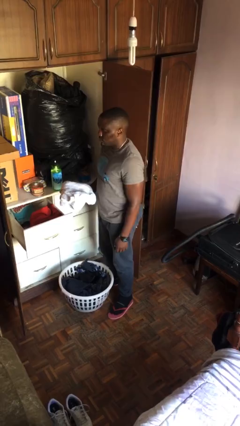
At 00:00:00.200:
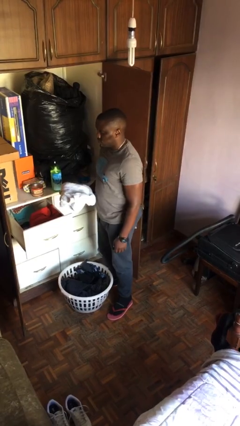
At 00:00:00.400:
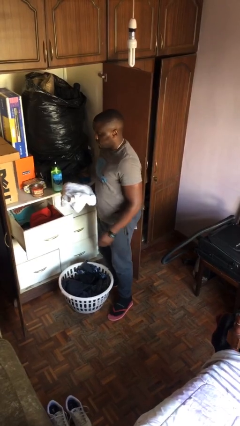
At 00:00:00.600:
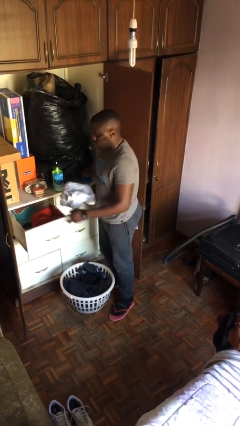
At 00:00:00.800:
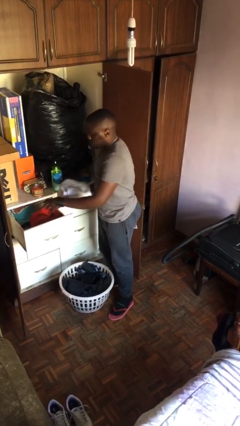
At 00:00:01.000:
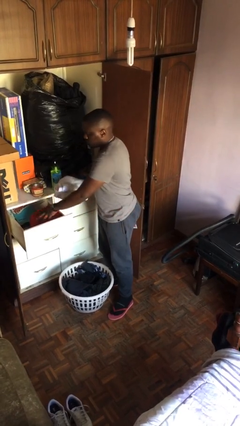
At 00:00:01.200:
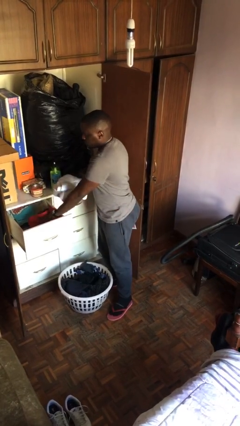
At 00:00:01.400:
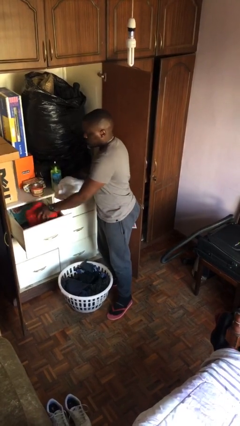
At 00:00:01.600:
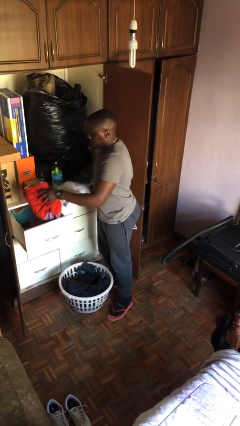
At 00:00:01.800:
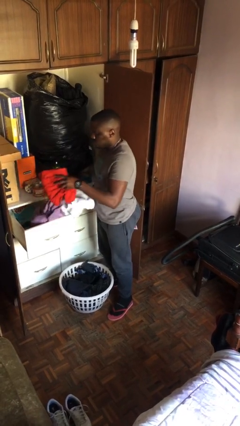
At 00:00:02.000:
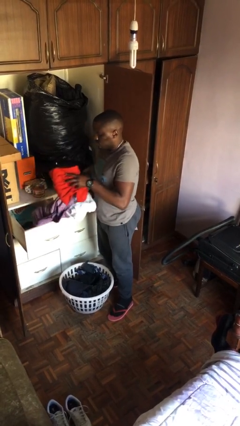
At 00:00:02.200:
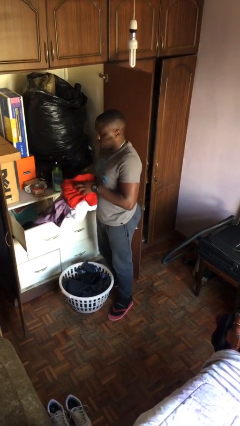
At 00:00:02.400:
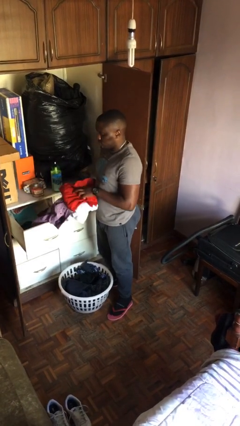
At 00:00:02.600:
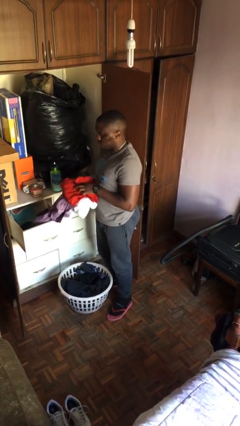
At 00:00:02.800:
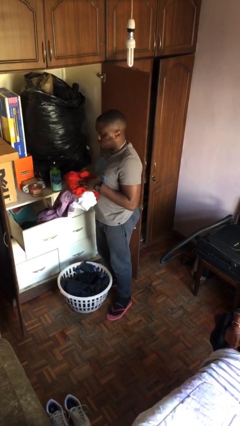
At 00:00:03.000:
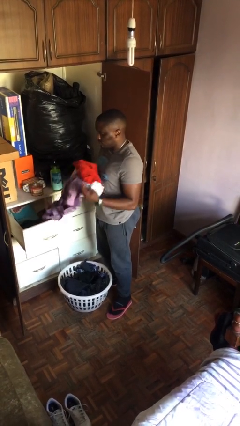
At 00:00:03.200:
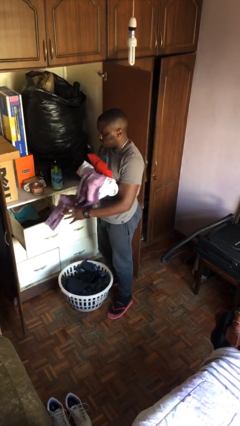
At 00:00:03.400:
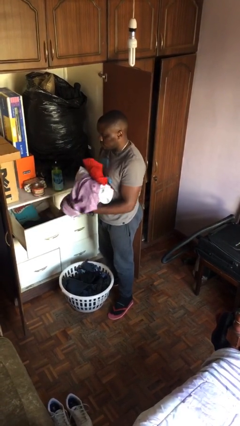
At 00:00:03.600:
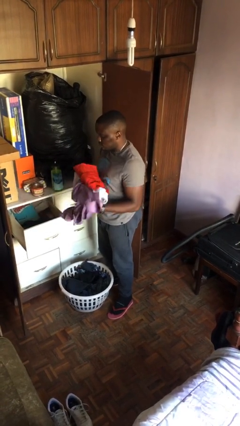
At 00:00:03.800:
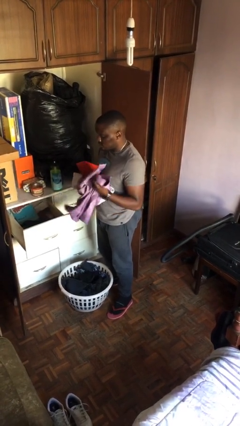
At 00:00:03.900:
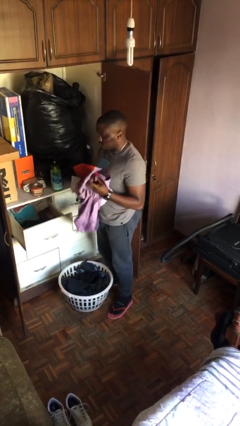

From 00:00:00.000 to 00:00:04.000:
person takes clothes from dresser

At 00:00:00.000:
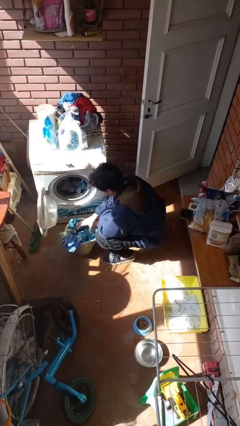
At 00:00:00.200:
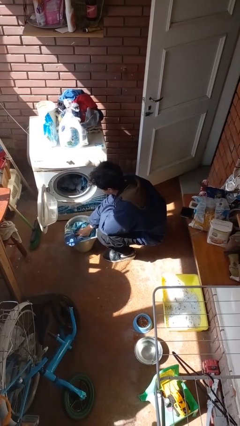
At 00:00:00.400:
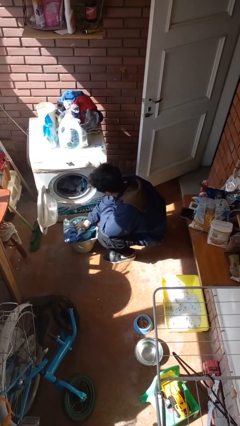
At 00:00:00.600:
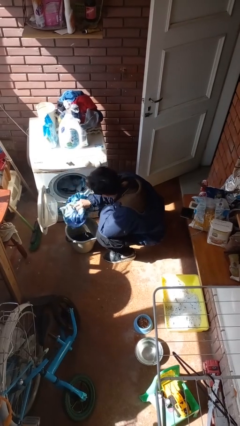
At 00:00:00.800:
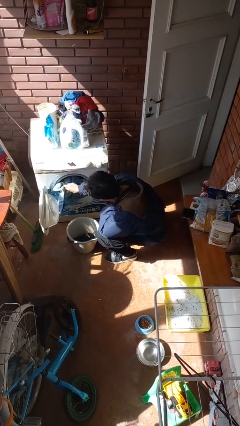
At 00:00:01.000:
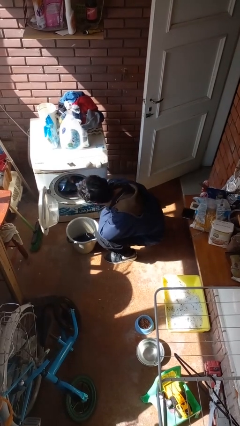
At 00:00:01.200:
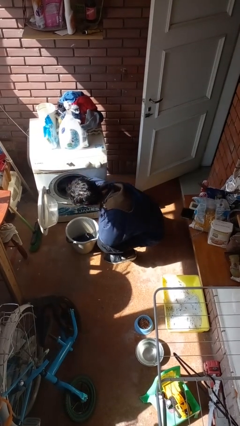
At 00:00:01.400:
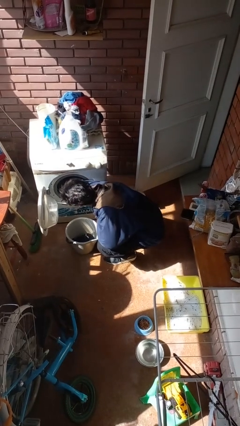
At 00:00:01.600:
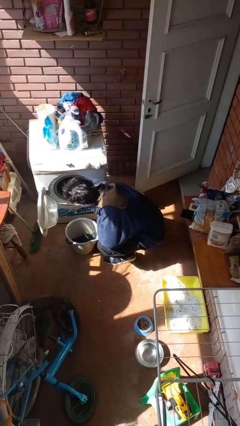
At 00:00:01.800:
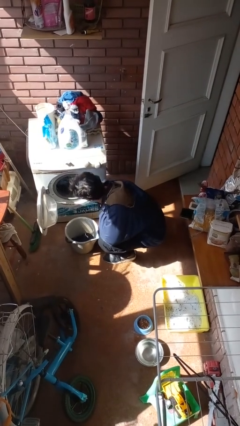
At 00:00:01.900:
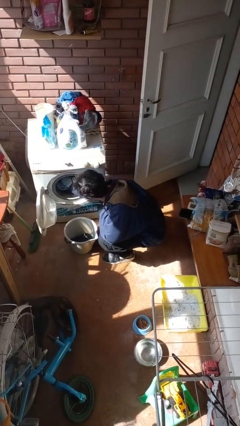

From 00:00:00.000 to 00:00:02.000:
person loads clotheswasher

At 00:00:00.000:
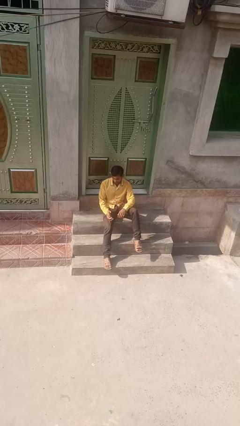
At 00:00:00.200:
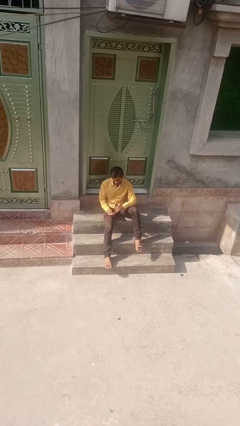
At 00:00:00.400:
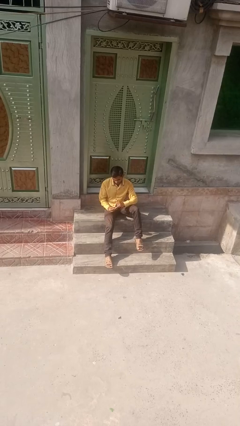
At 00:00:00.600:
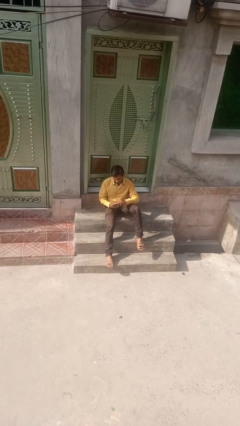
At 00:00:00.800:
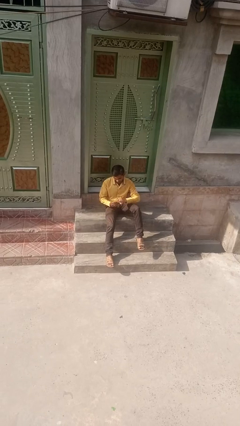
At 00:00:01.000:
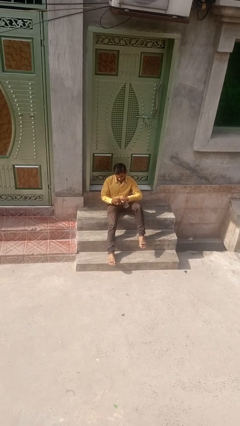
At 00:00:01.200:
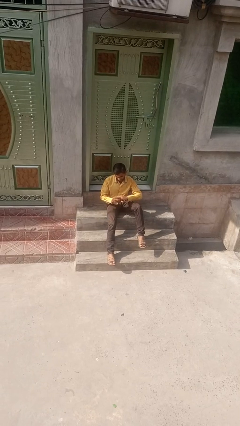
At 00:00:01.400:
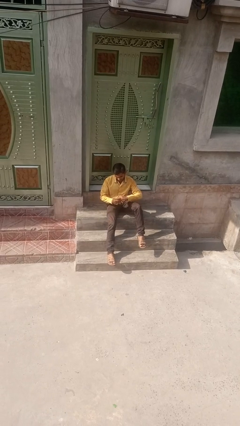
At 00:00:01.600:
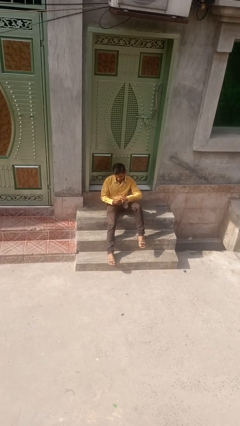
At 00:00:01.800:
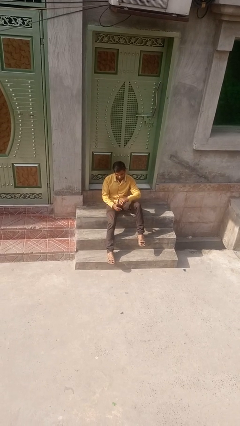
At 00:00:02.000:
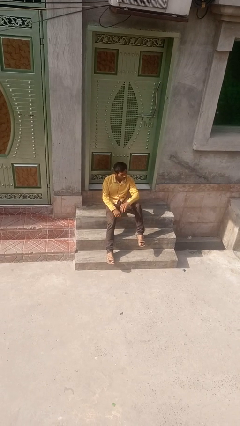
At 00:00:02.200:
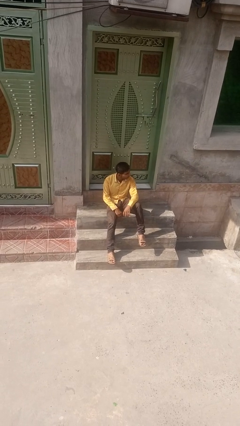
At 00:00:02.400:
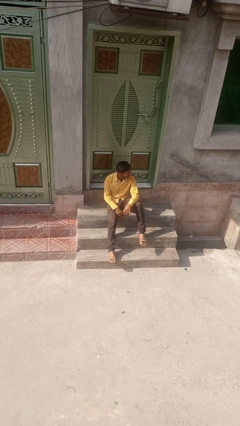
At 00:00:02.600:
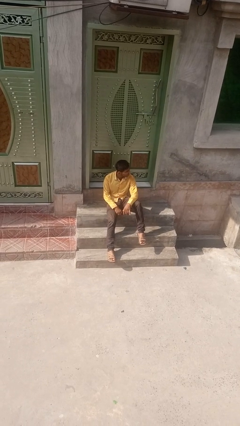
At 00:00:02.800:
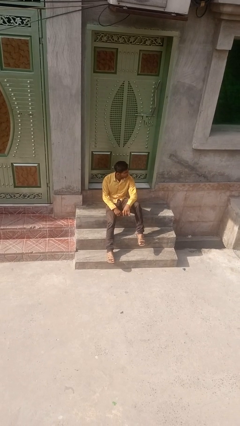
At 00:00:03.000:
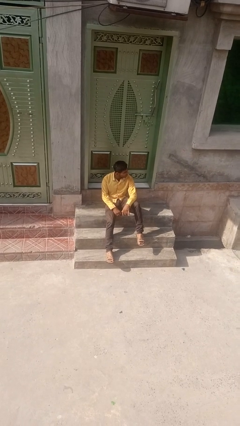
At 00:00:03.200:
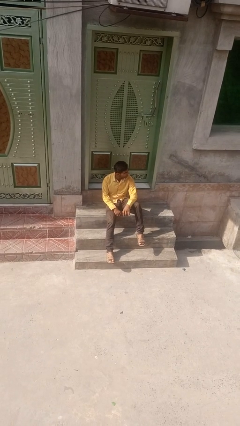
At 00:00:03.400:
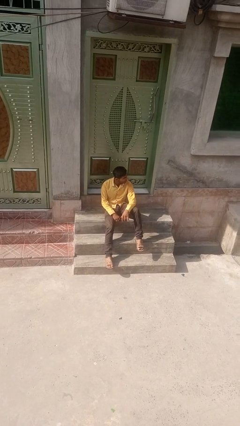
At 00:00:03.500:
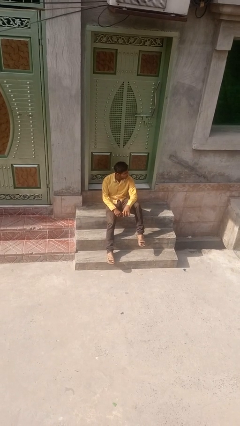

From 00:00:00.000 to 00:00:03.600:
person puts on ring

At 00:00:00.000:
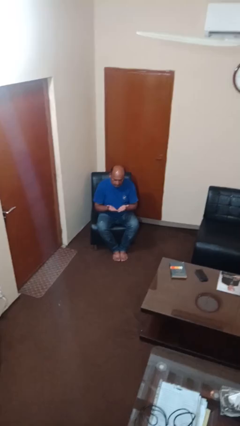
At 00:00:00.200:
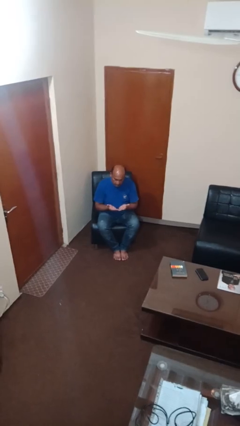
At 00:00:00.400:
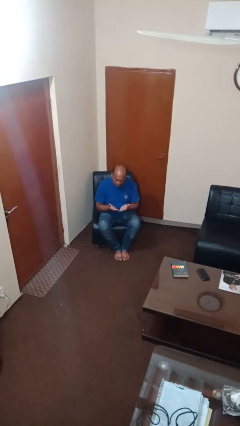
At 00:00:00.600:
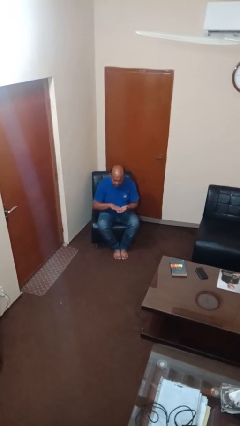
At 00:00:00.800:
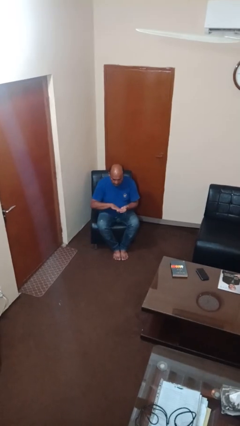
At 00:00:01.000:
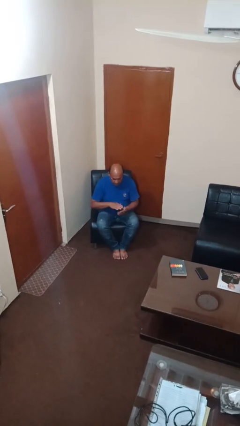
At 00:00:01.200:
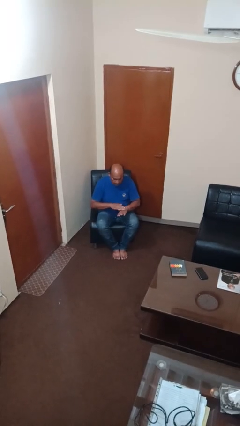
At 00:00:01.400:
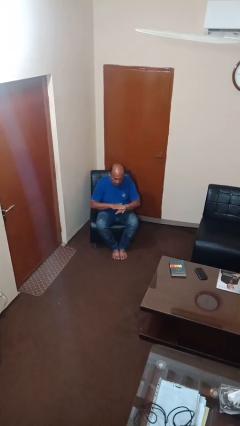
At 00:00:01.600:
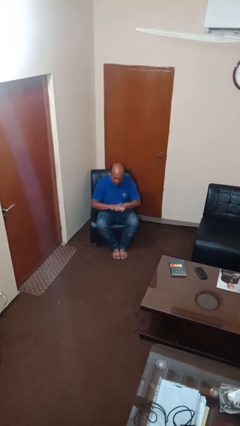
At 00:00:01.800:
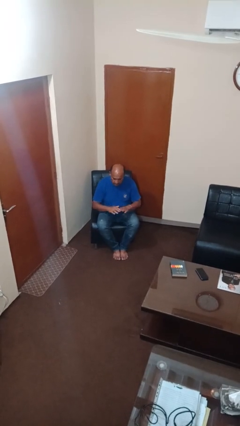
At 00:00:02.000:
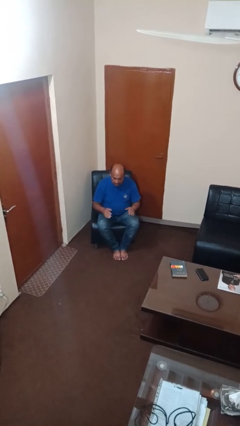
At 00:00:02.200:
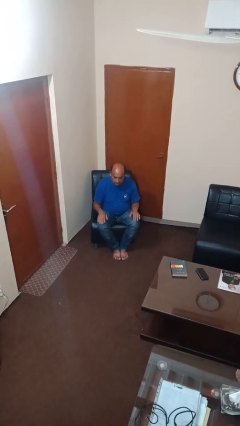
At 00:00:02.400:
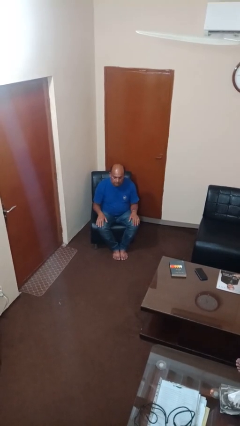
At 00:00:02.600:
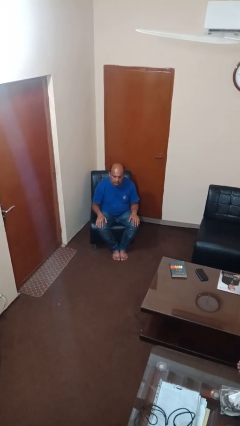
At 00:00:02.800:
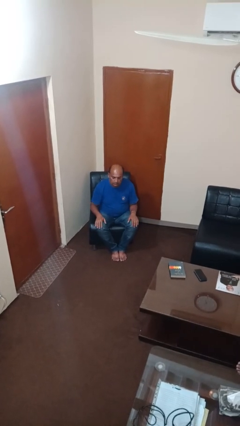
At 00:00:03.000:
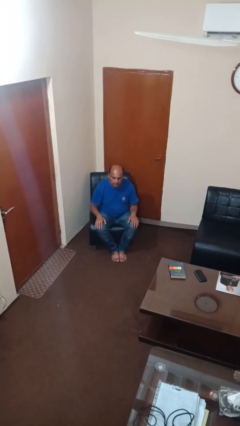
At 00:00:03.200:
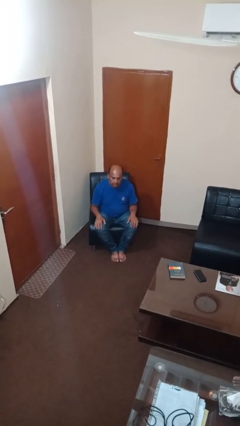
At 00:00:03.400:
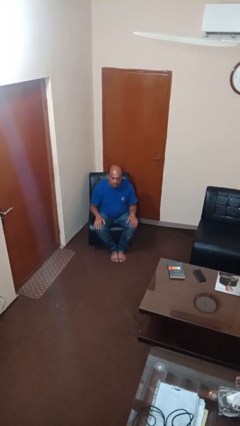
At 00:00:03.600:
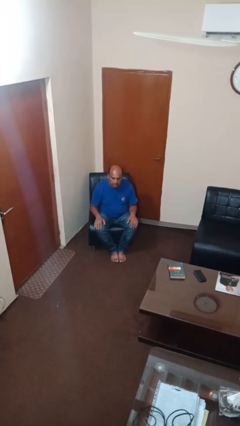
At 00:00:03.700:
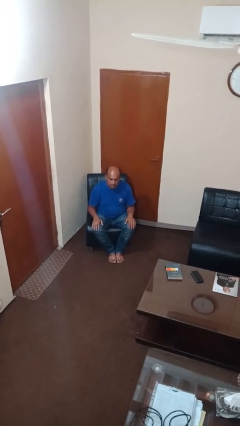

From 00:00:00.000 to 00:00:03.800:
person looks at hands in lap

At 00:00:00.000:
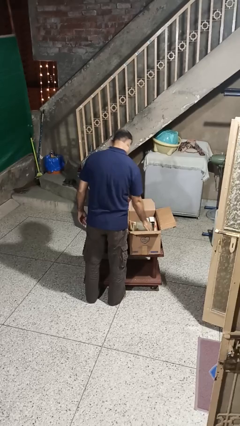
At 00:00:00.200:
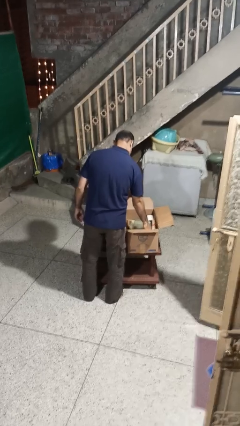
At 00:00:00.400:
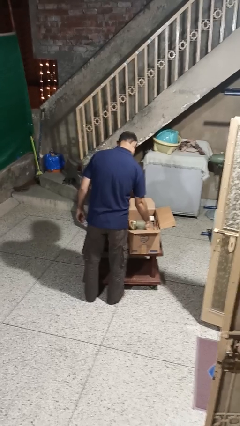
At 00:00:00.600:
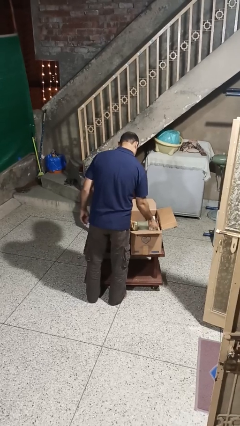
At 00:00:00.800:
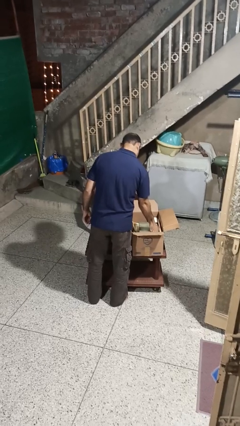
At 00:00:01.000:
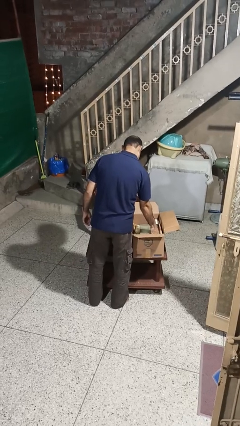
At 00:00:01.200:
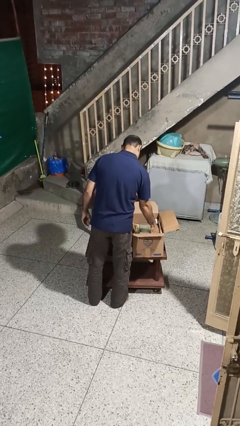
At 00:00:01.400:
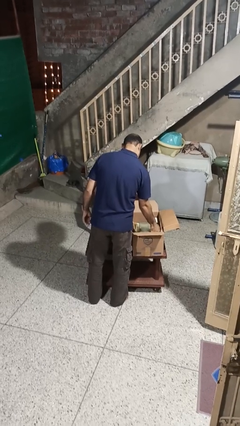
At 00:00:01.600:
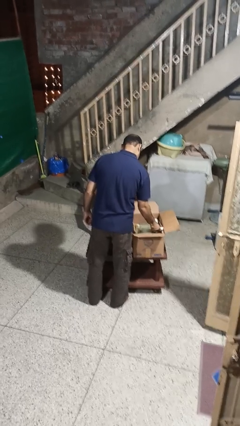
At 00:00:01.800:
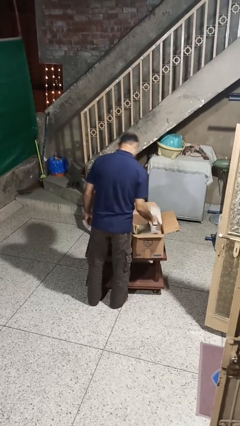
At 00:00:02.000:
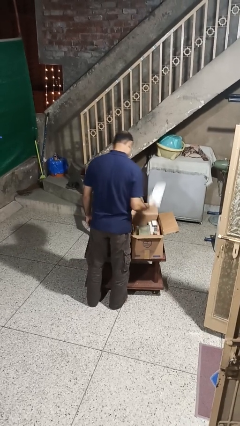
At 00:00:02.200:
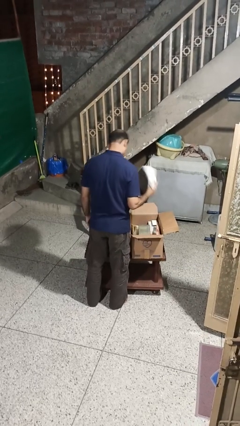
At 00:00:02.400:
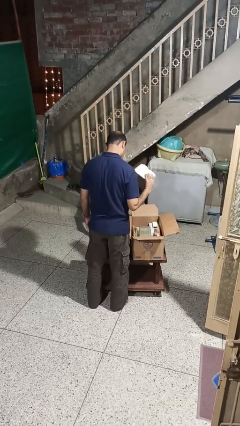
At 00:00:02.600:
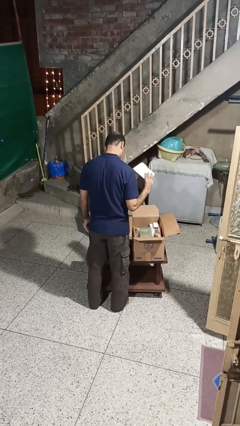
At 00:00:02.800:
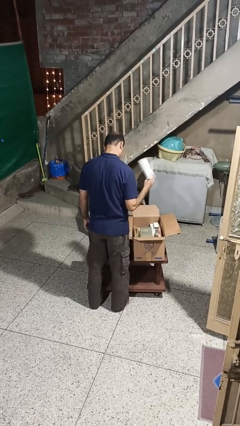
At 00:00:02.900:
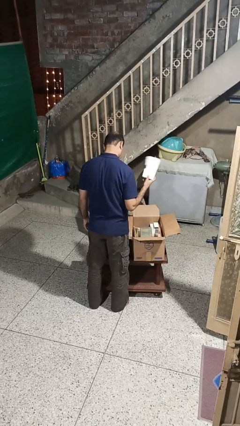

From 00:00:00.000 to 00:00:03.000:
person takes object from box

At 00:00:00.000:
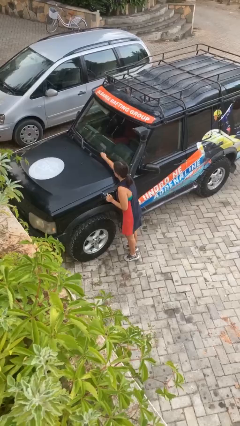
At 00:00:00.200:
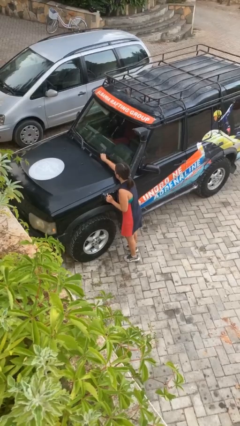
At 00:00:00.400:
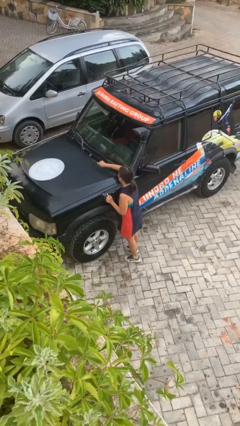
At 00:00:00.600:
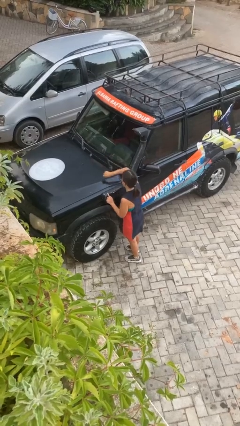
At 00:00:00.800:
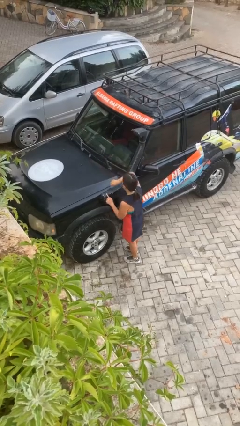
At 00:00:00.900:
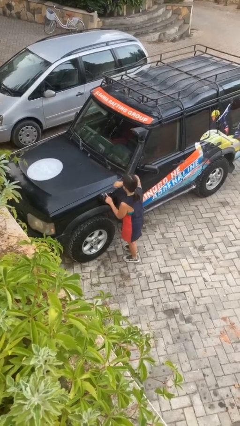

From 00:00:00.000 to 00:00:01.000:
person flips down car wipers
